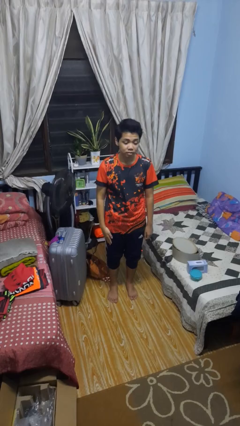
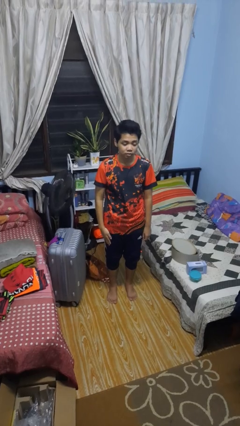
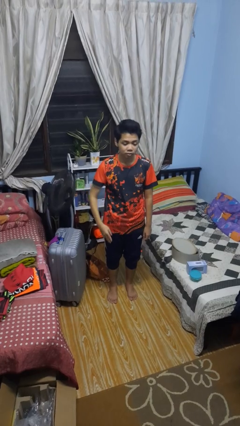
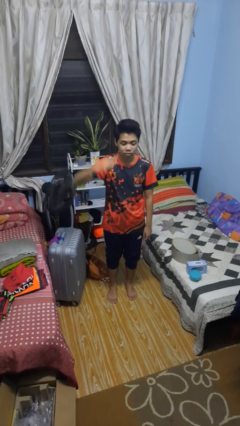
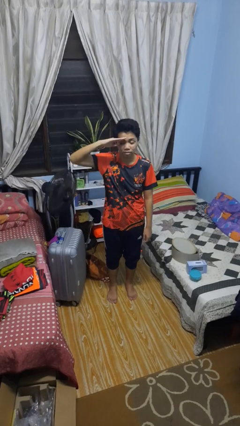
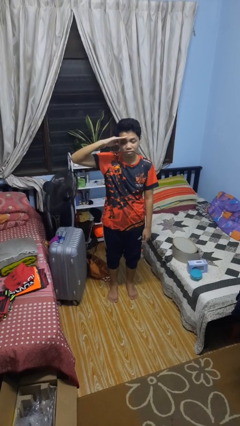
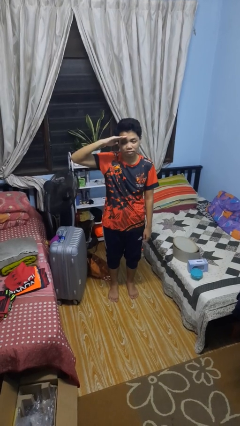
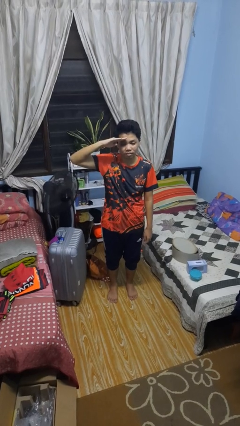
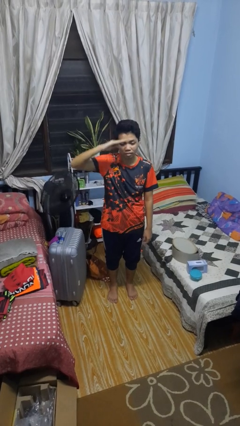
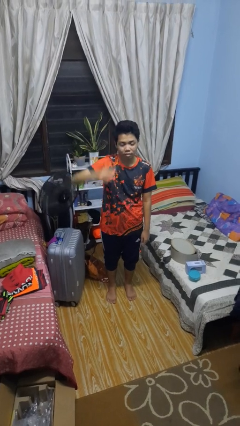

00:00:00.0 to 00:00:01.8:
person salutes

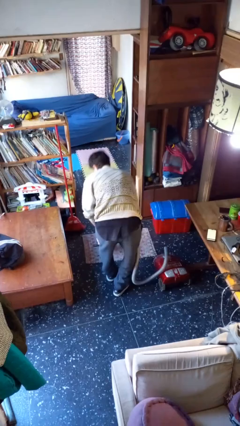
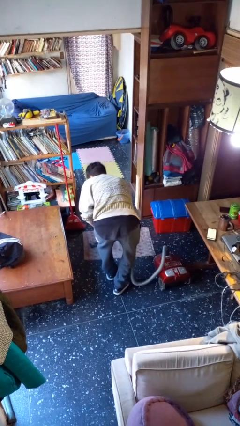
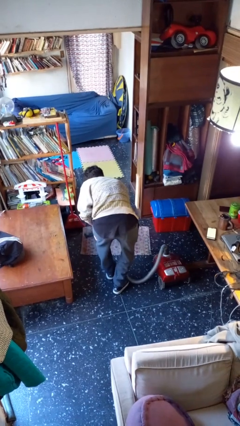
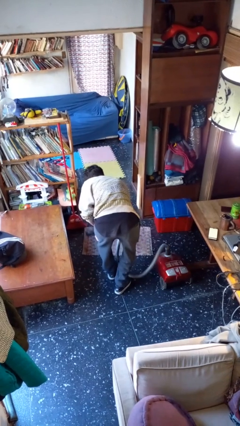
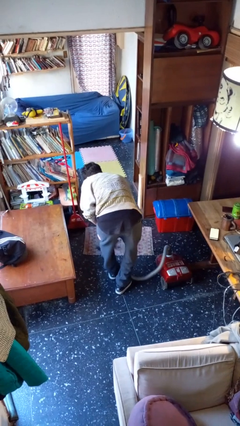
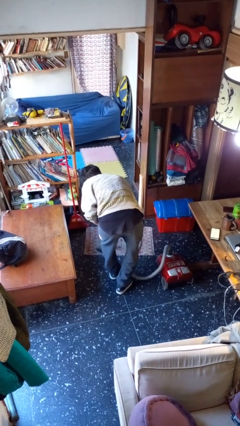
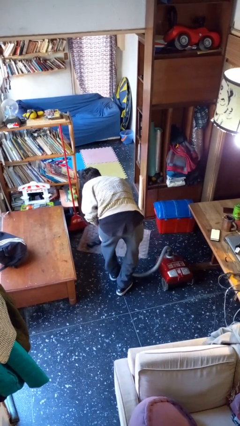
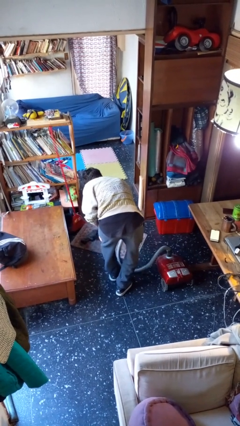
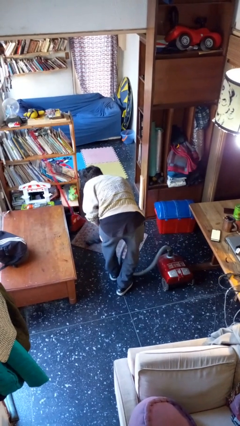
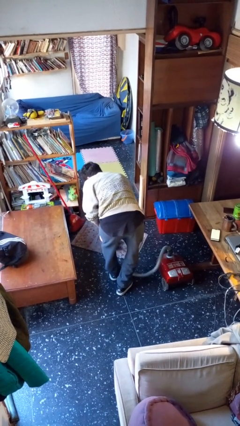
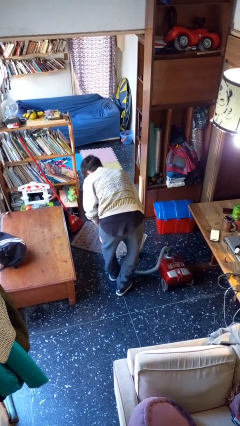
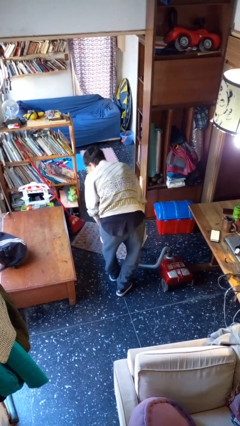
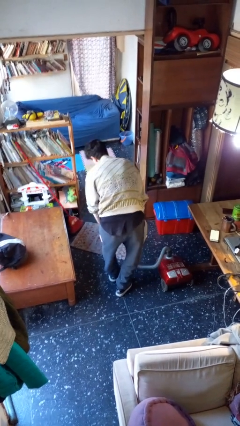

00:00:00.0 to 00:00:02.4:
person vacuums carpet

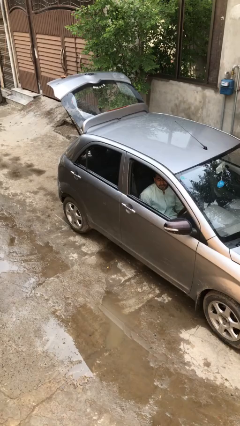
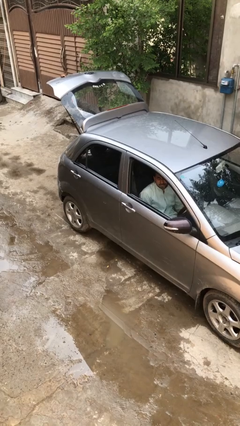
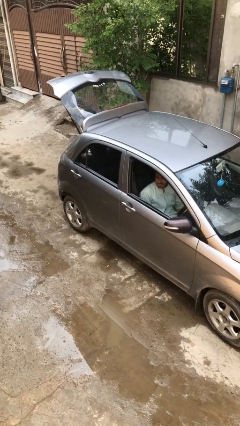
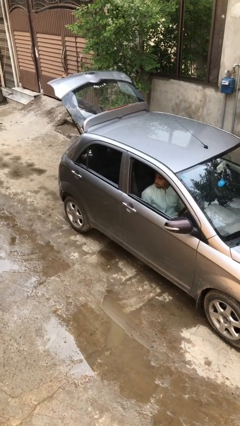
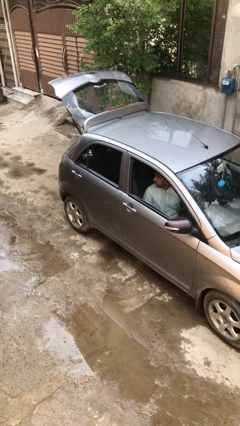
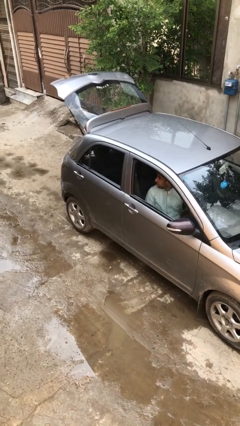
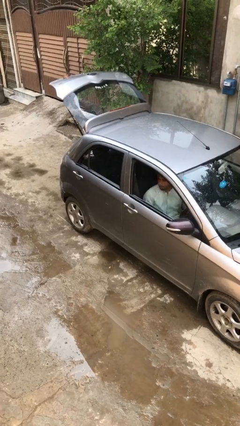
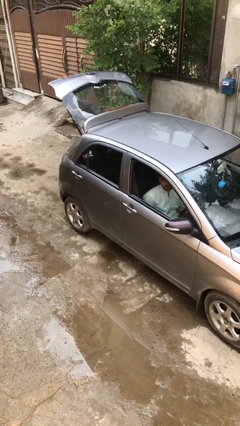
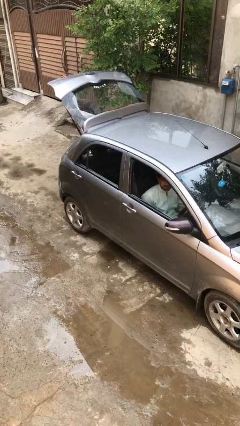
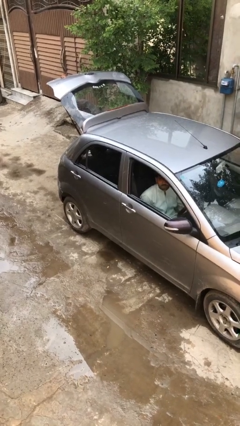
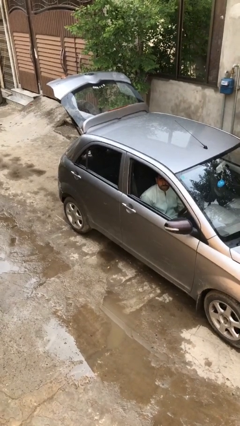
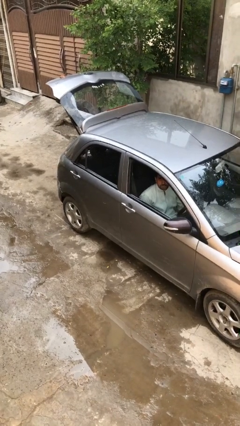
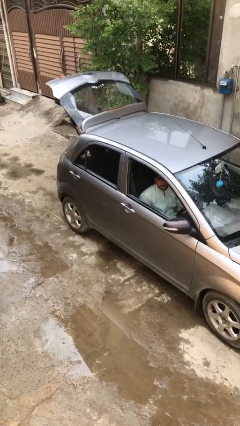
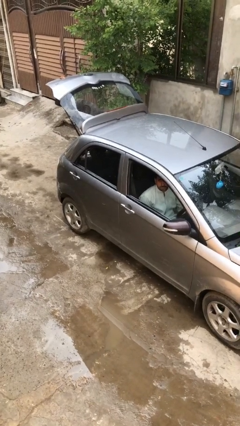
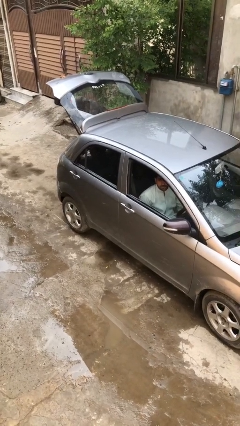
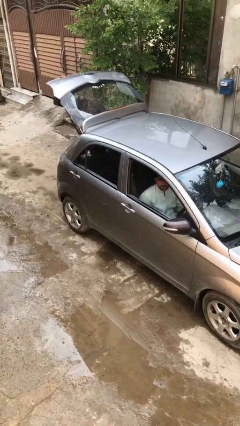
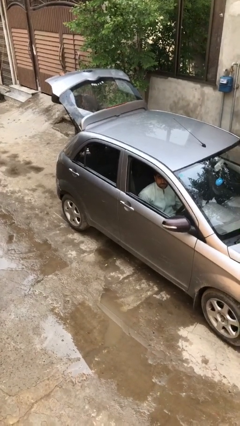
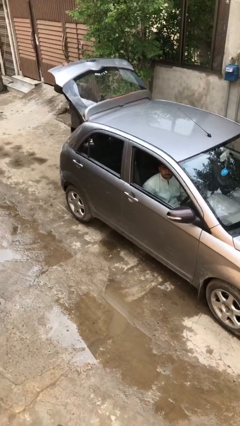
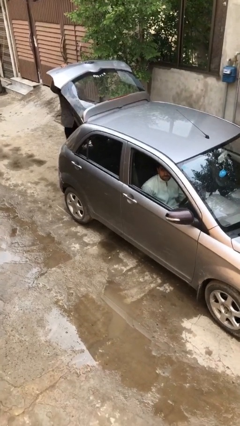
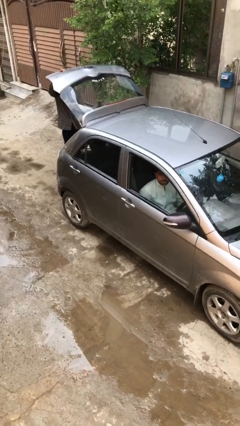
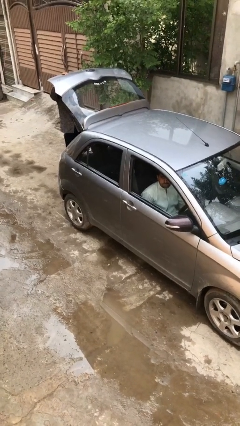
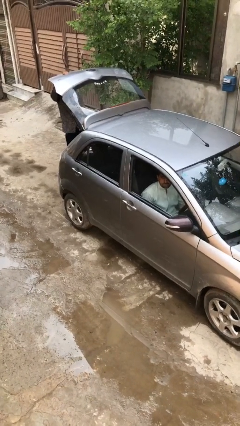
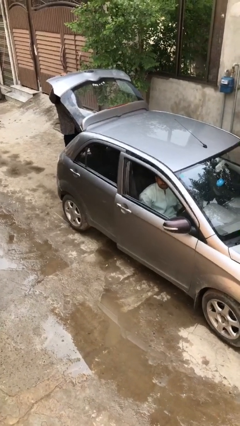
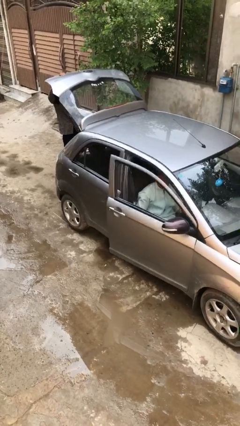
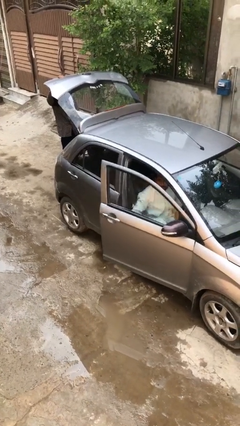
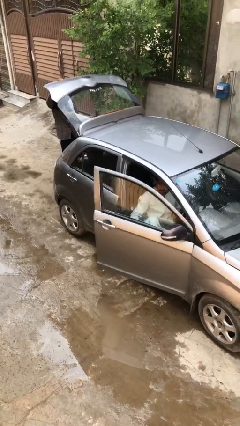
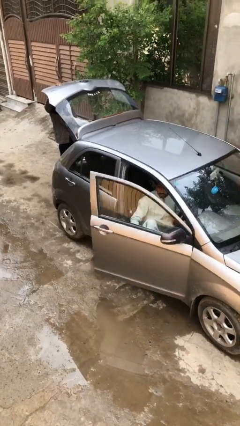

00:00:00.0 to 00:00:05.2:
person opens car door

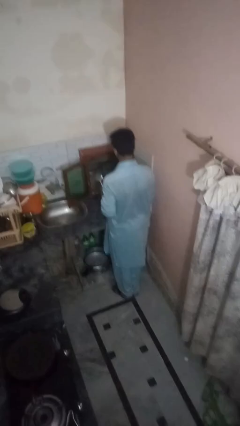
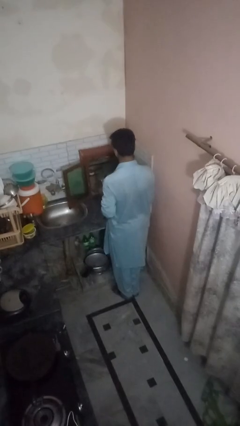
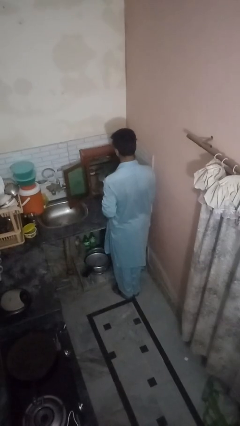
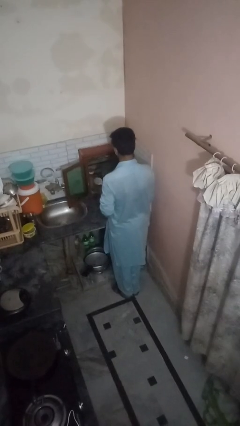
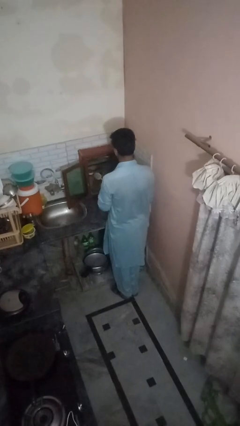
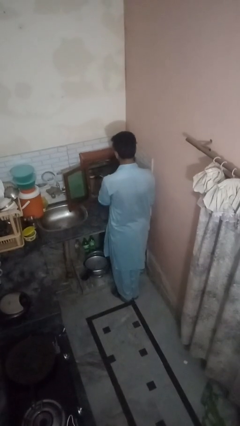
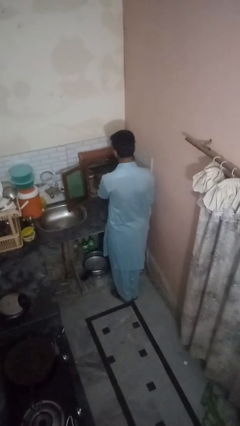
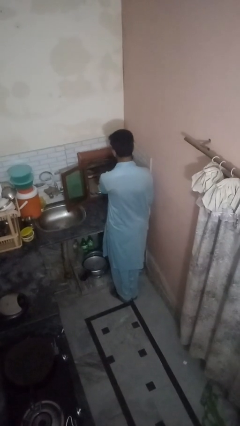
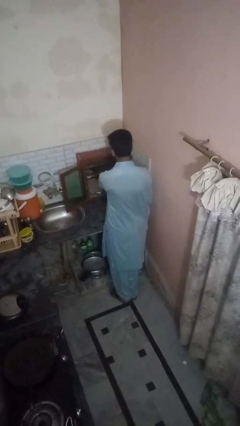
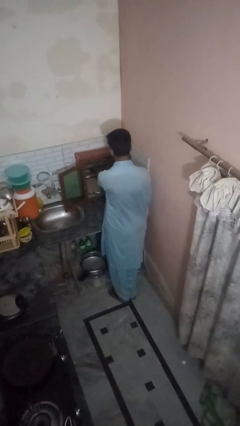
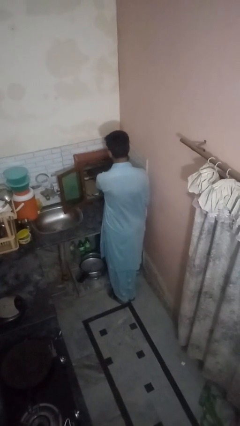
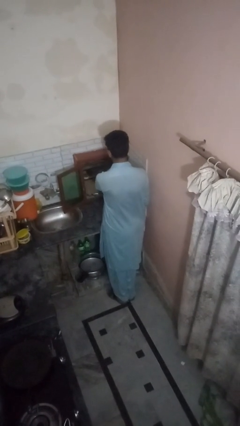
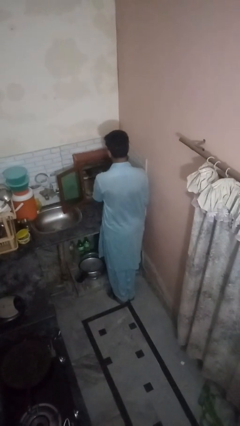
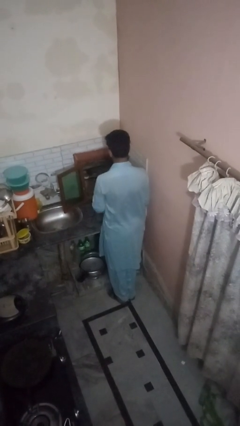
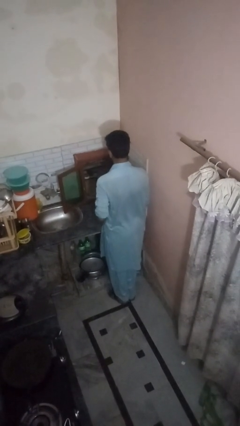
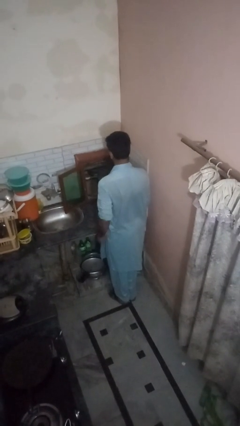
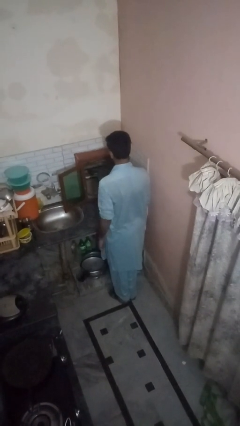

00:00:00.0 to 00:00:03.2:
person puts object into kitchen drawer

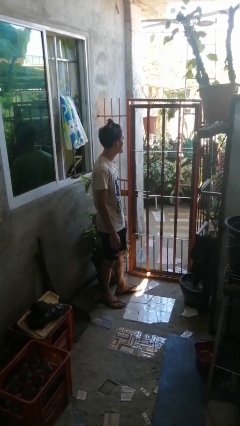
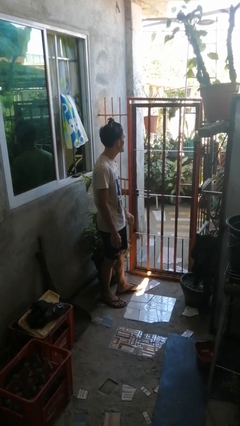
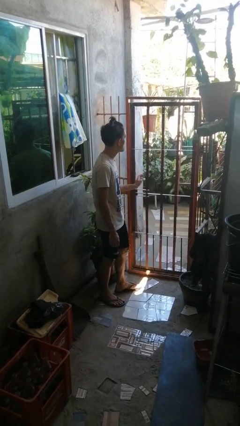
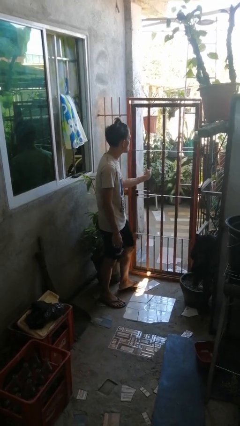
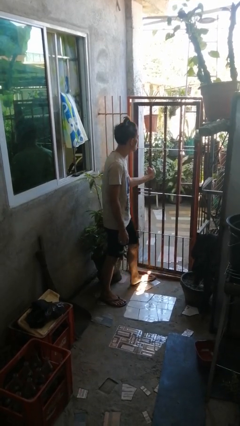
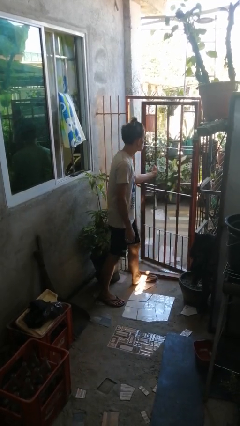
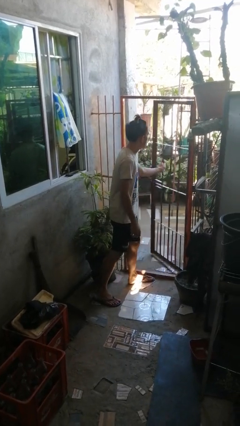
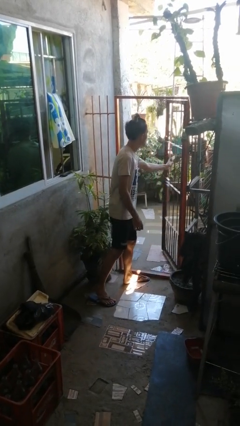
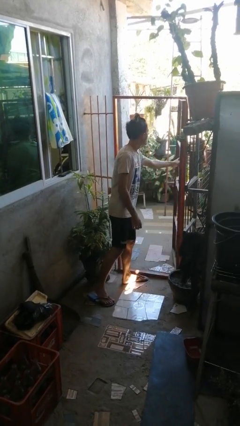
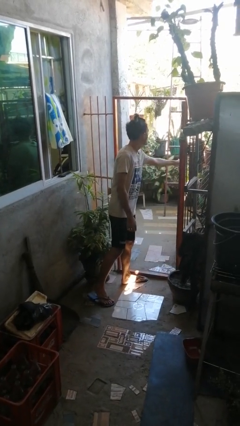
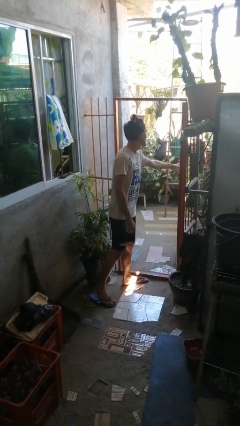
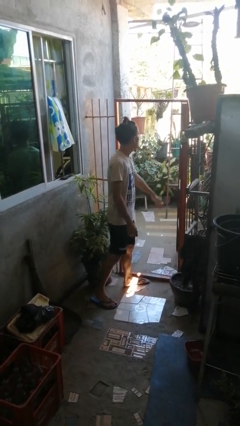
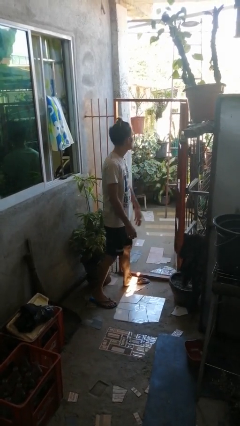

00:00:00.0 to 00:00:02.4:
person opens gate

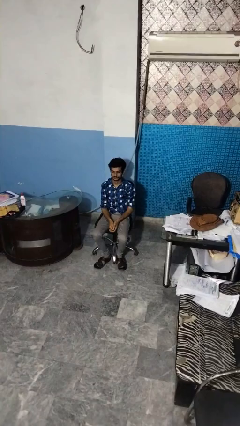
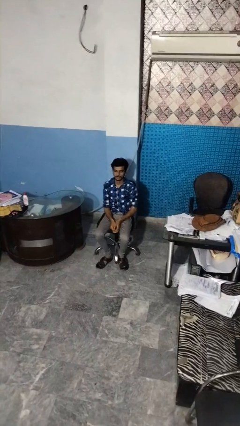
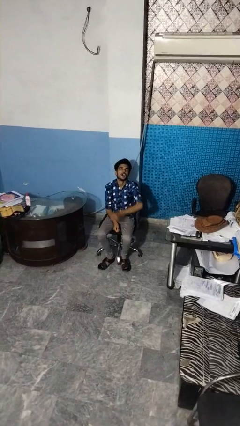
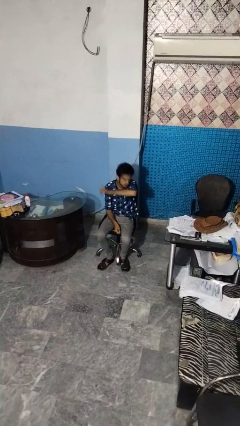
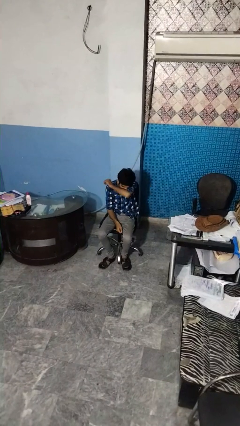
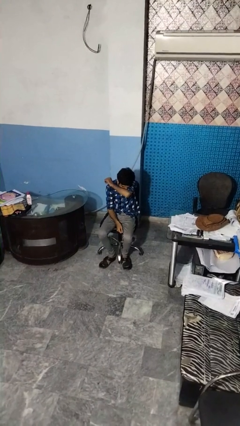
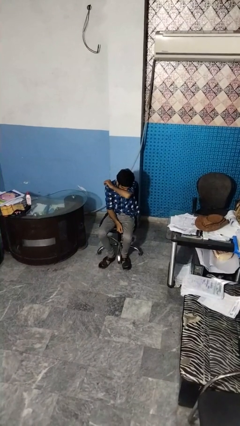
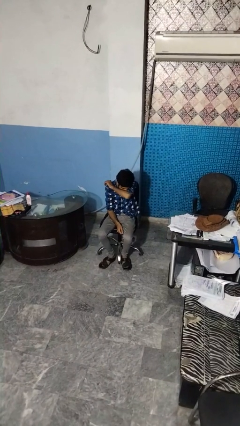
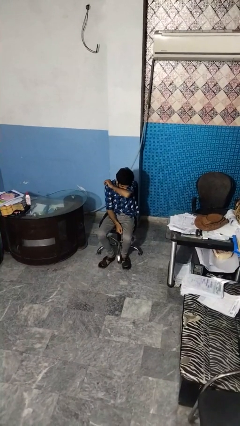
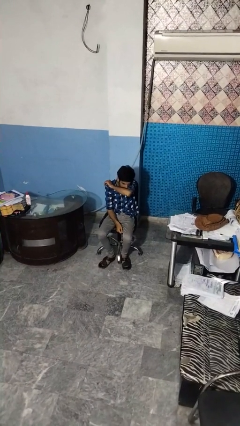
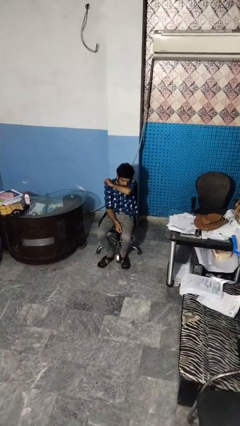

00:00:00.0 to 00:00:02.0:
person sneezes into arm
